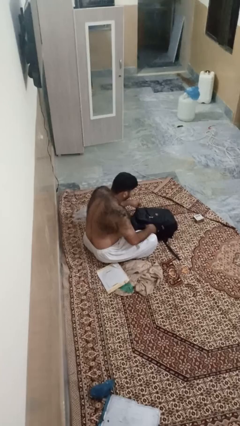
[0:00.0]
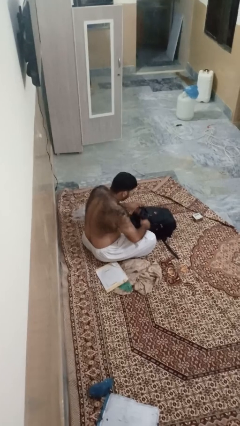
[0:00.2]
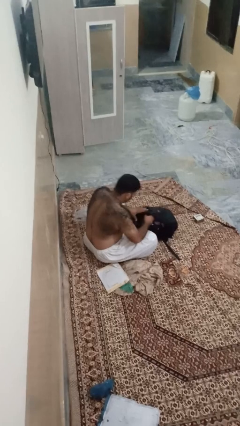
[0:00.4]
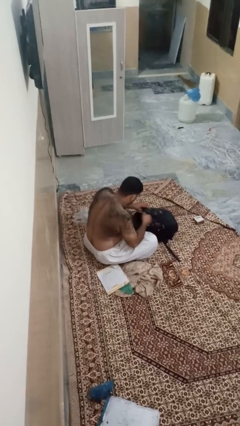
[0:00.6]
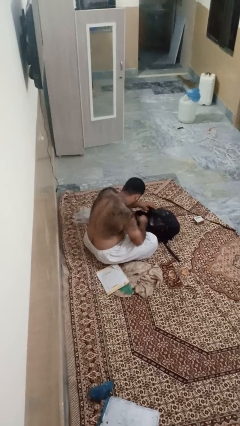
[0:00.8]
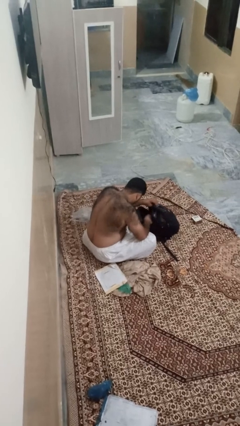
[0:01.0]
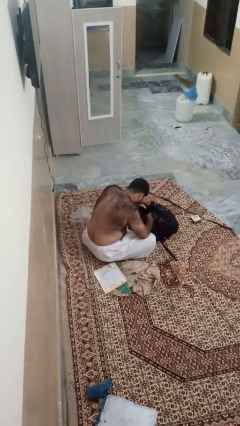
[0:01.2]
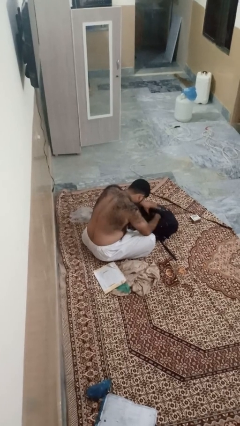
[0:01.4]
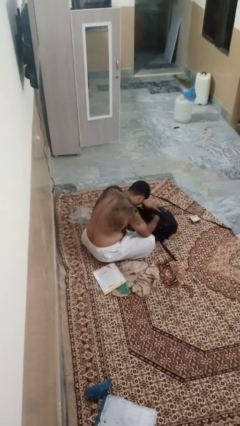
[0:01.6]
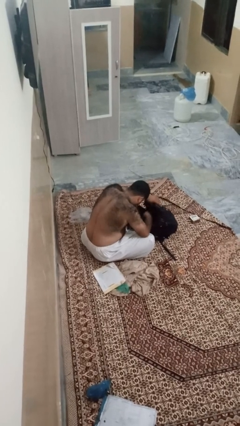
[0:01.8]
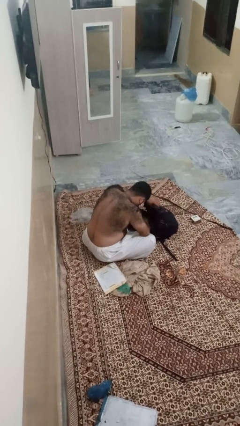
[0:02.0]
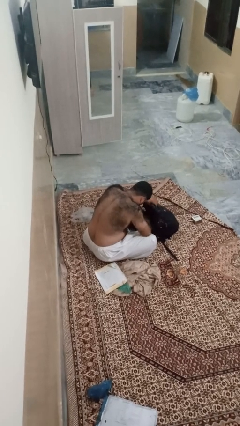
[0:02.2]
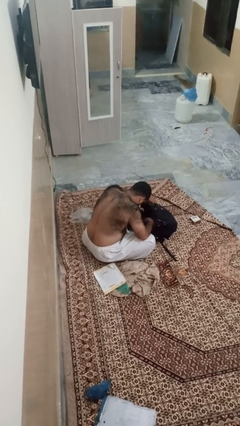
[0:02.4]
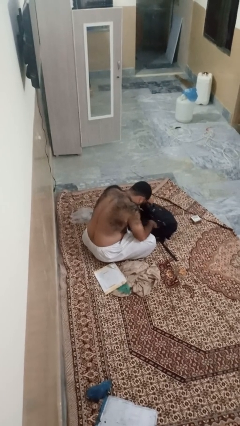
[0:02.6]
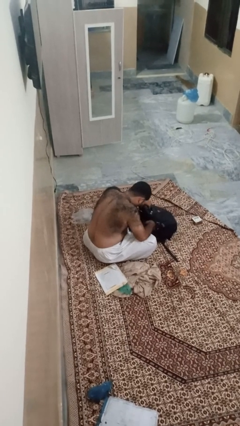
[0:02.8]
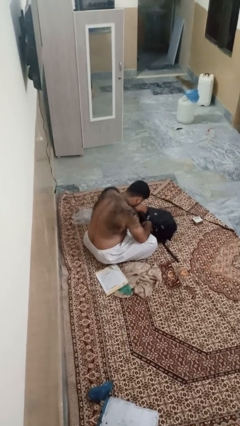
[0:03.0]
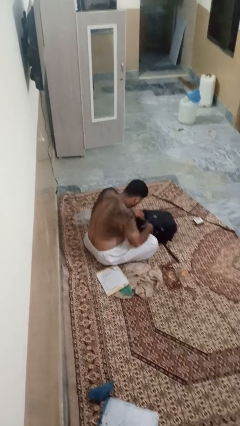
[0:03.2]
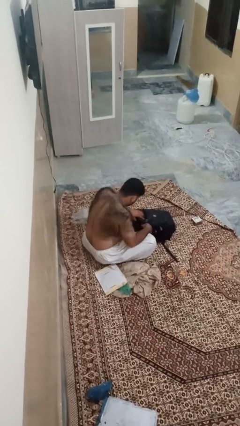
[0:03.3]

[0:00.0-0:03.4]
person searches in bag

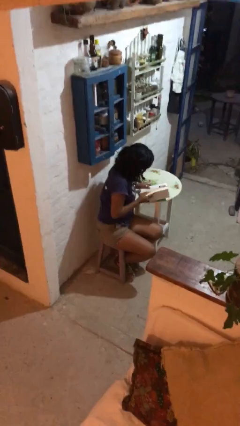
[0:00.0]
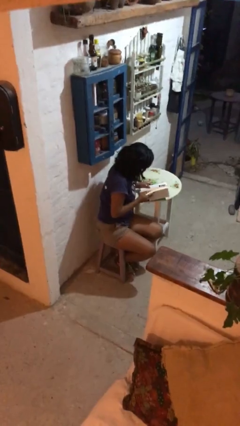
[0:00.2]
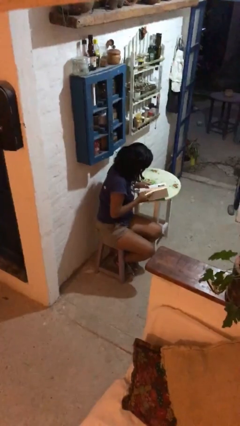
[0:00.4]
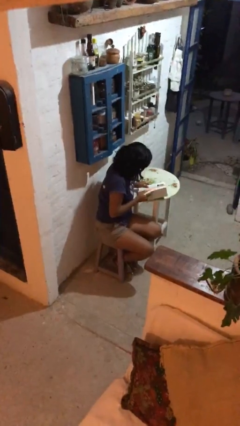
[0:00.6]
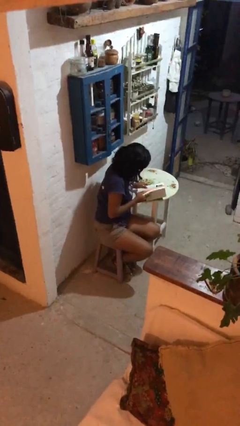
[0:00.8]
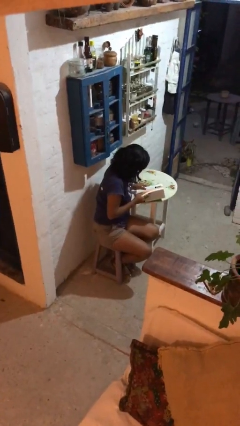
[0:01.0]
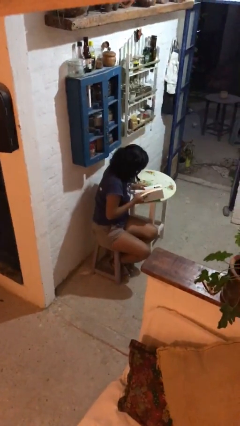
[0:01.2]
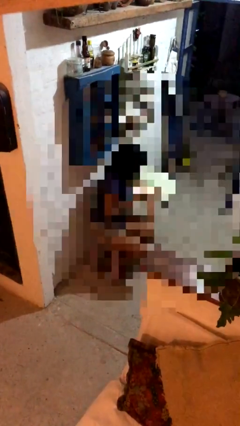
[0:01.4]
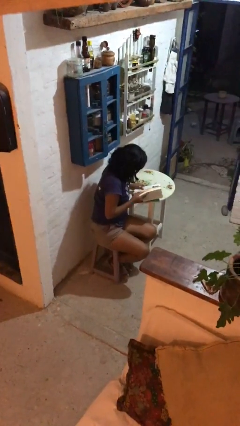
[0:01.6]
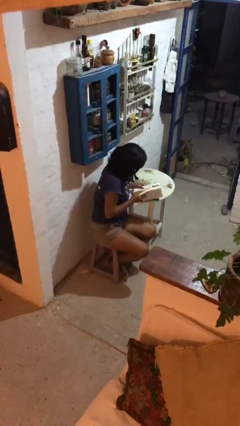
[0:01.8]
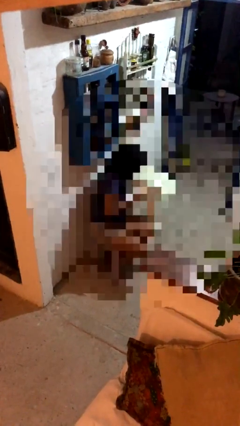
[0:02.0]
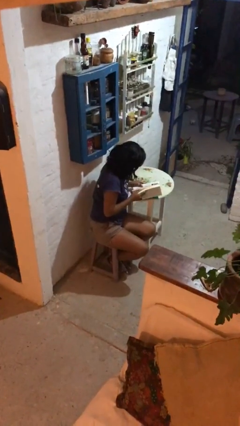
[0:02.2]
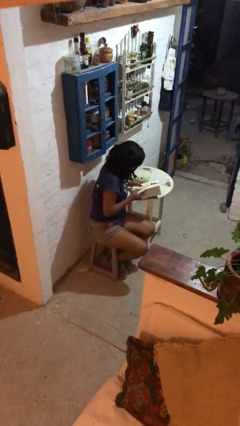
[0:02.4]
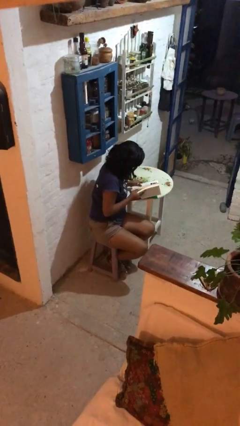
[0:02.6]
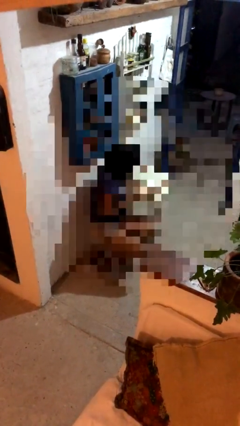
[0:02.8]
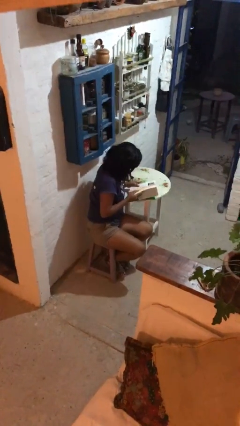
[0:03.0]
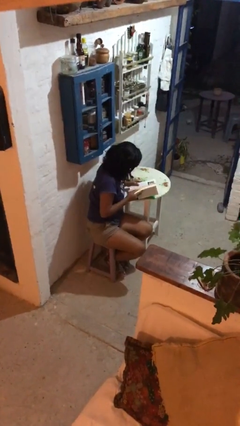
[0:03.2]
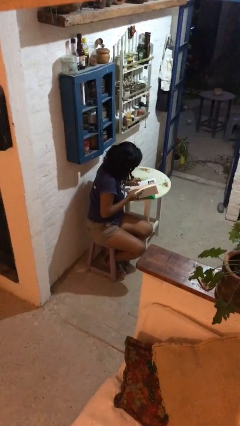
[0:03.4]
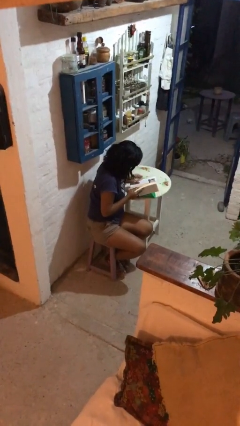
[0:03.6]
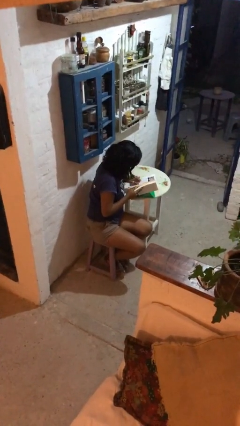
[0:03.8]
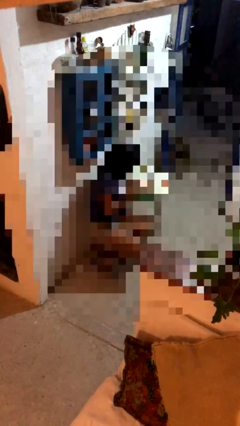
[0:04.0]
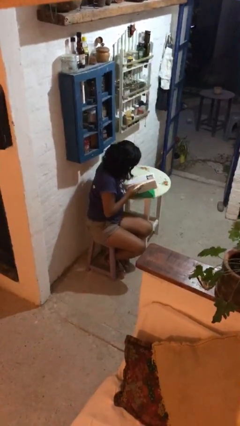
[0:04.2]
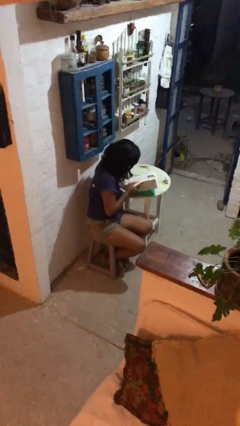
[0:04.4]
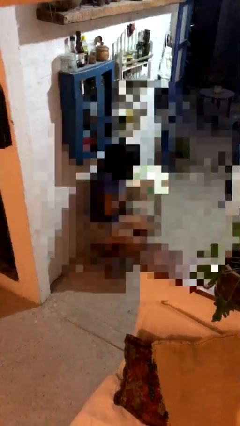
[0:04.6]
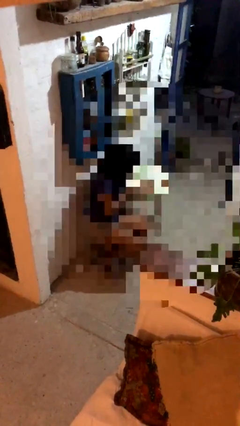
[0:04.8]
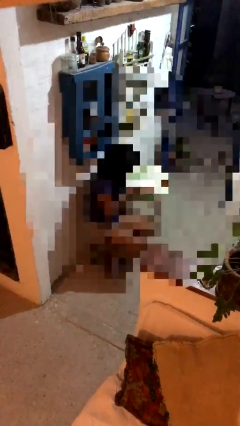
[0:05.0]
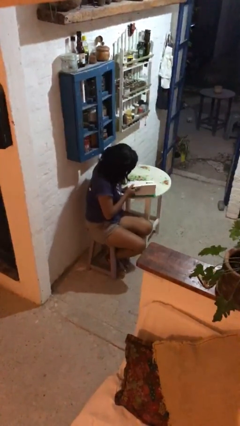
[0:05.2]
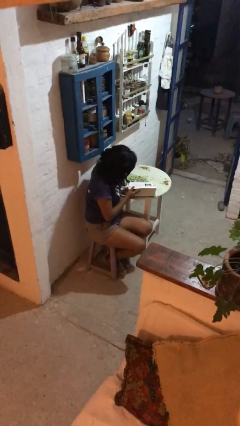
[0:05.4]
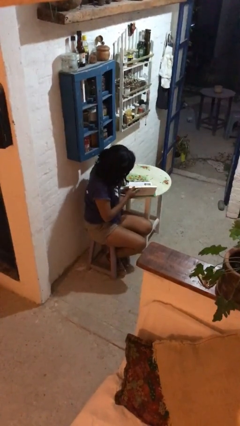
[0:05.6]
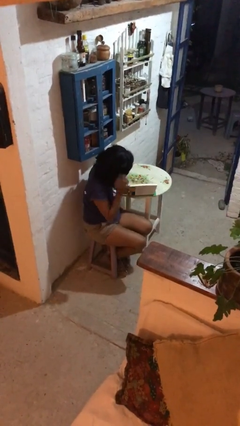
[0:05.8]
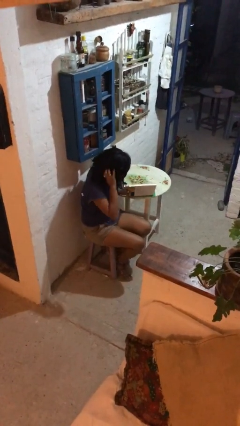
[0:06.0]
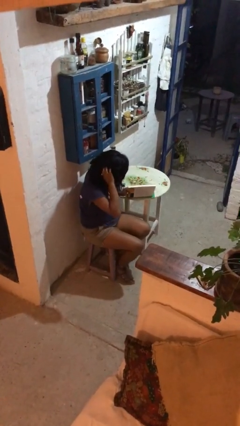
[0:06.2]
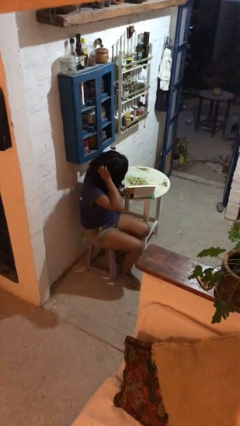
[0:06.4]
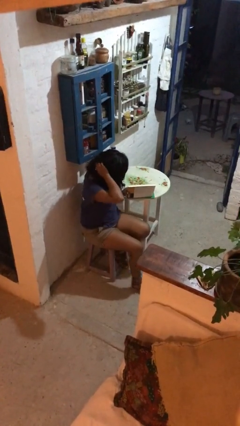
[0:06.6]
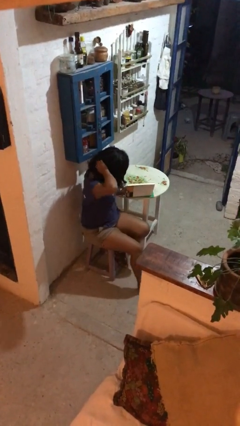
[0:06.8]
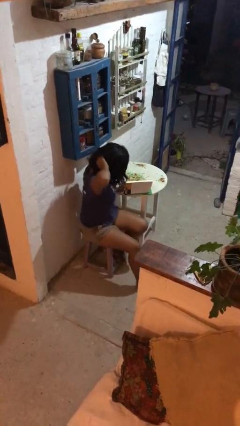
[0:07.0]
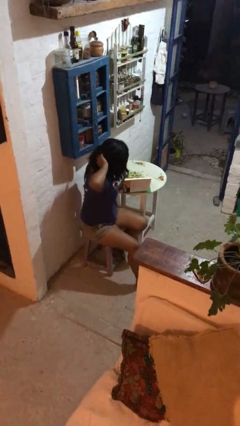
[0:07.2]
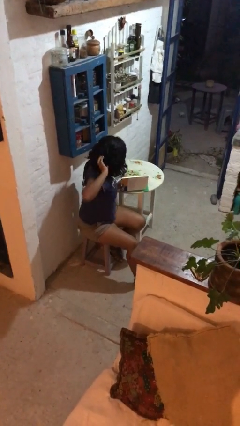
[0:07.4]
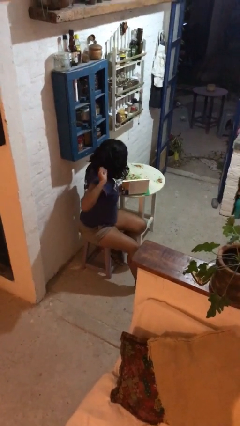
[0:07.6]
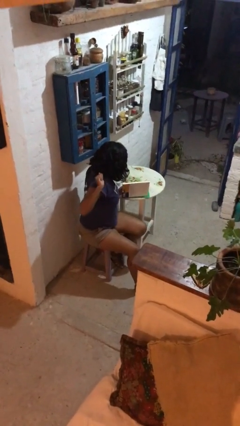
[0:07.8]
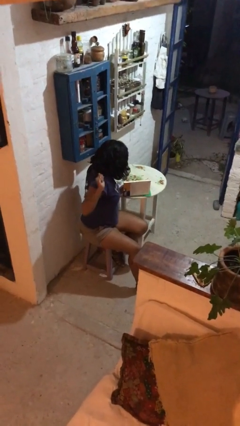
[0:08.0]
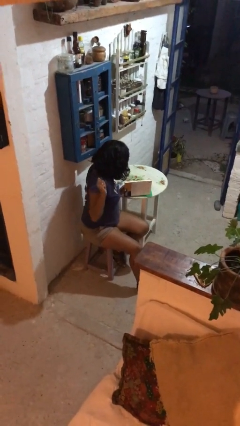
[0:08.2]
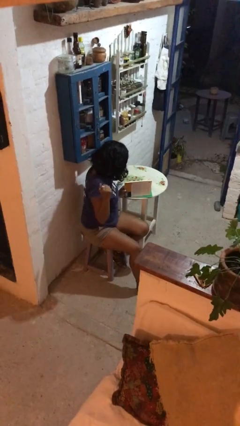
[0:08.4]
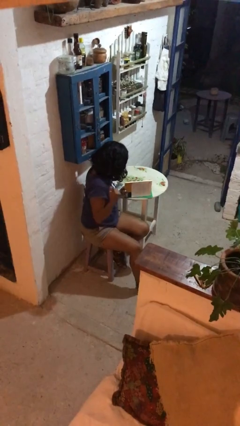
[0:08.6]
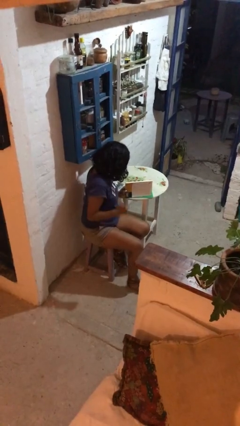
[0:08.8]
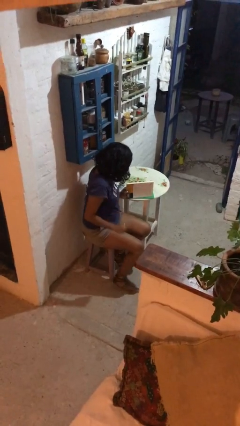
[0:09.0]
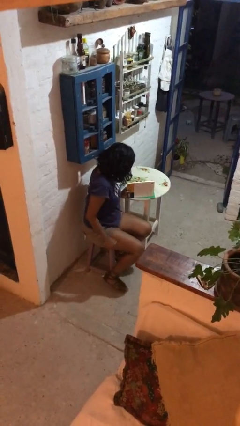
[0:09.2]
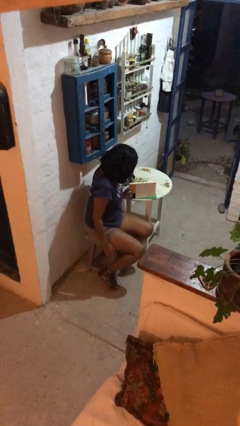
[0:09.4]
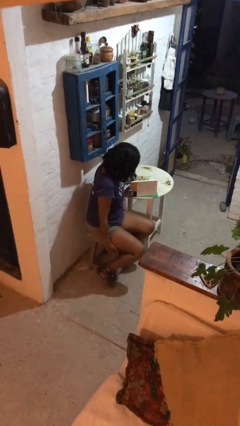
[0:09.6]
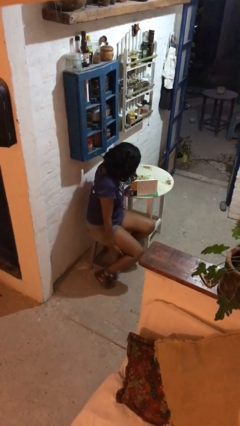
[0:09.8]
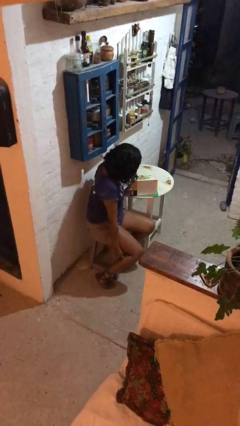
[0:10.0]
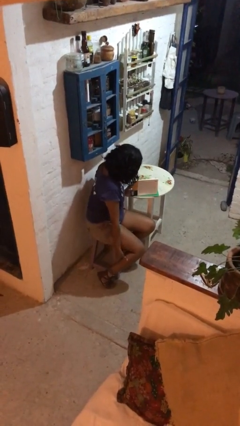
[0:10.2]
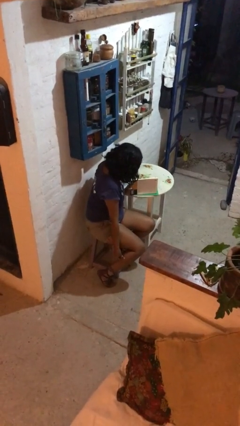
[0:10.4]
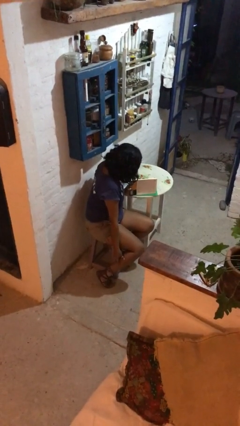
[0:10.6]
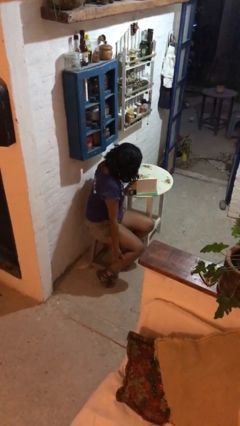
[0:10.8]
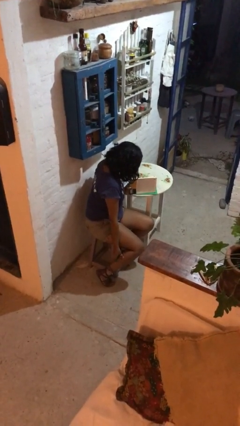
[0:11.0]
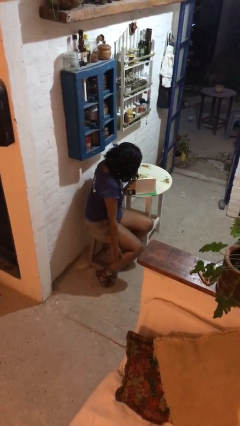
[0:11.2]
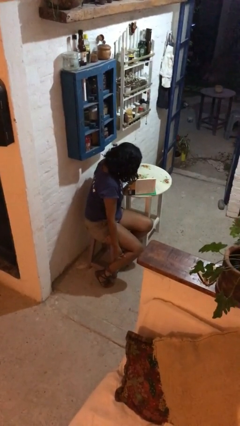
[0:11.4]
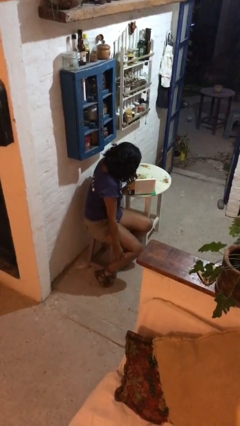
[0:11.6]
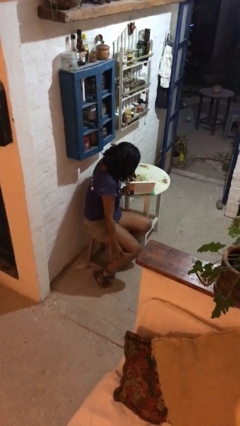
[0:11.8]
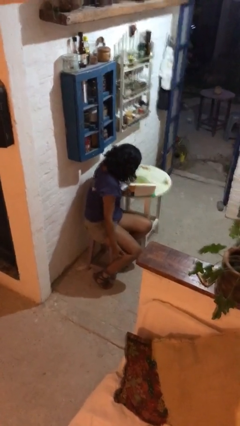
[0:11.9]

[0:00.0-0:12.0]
person reads document

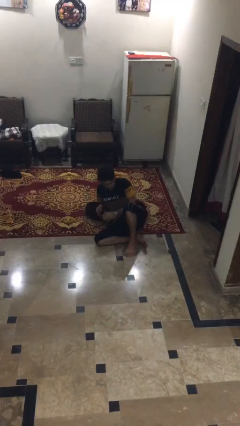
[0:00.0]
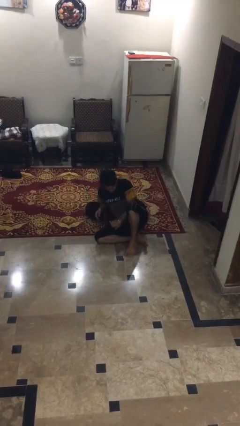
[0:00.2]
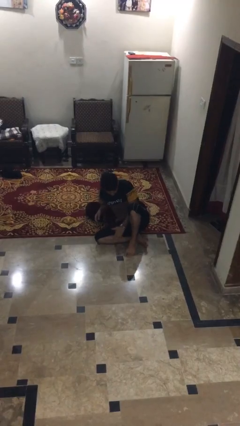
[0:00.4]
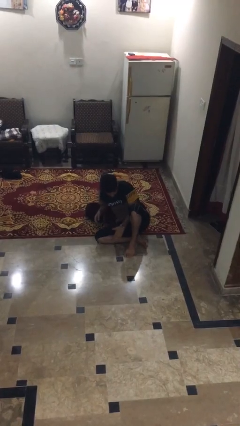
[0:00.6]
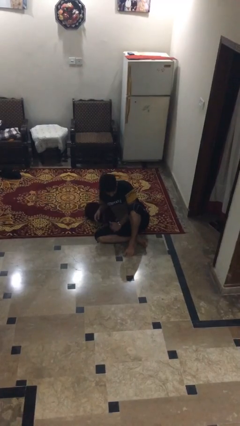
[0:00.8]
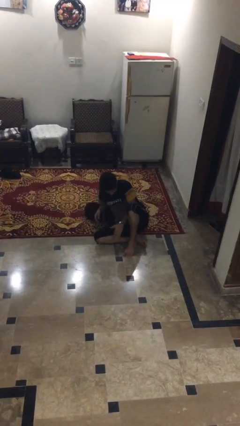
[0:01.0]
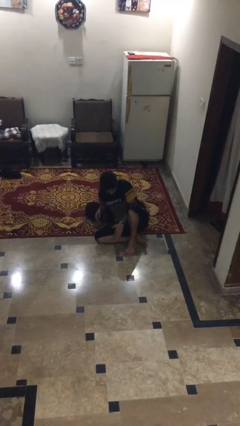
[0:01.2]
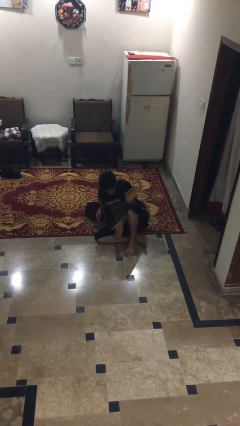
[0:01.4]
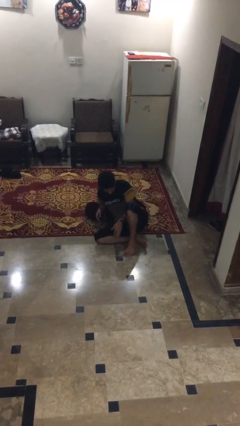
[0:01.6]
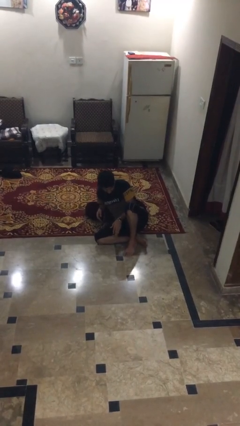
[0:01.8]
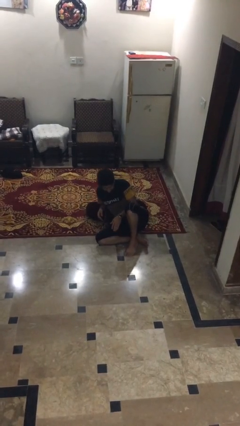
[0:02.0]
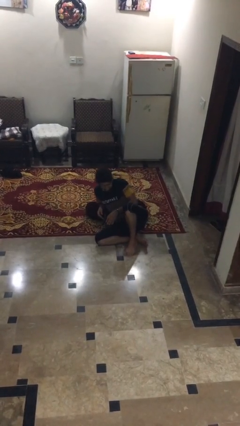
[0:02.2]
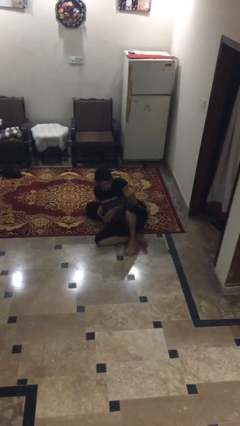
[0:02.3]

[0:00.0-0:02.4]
person swats bug
